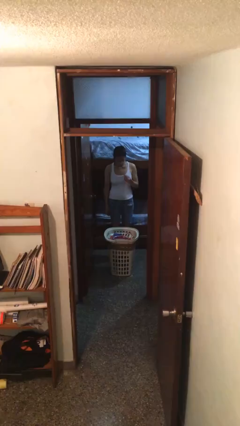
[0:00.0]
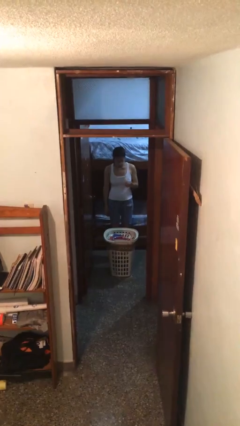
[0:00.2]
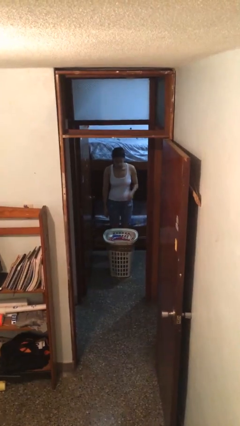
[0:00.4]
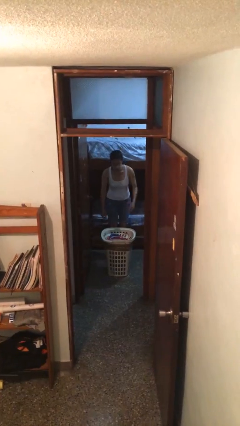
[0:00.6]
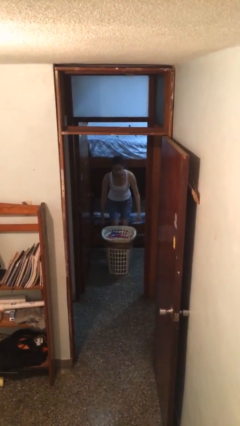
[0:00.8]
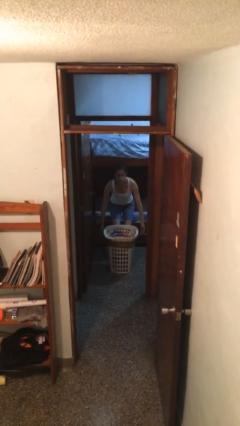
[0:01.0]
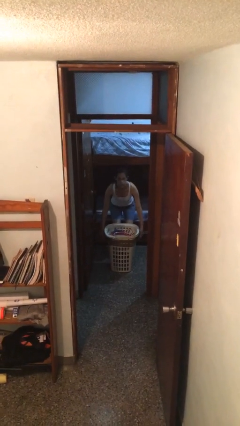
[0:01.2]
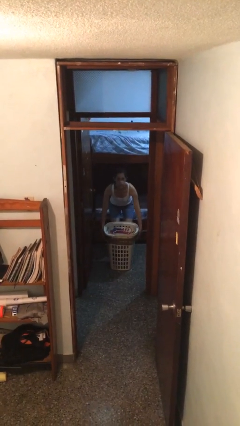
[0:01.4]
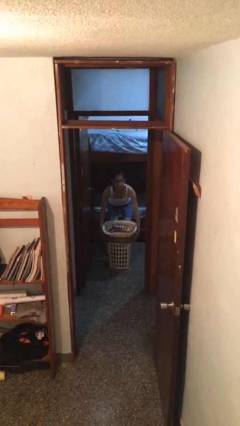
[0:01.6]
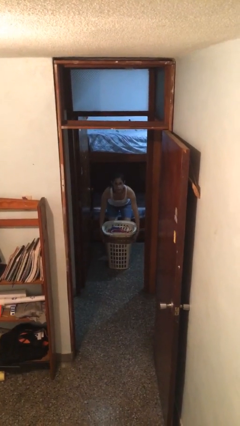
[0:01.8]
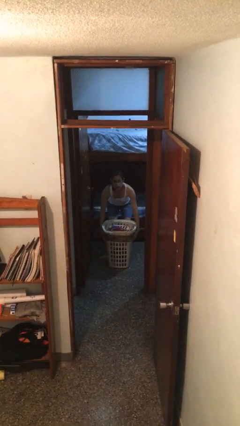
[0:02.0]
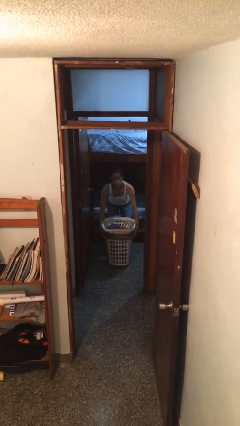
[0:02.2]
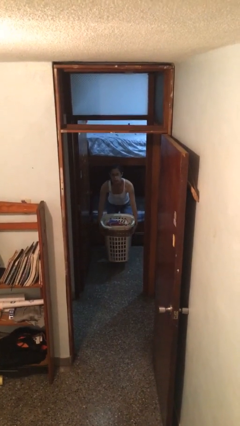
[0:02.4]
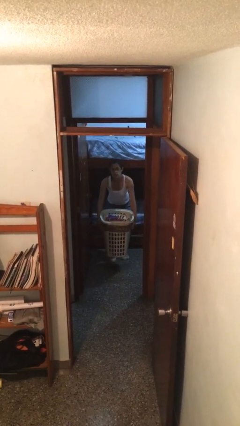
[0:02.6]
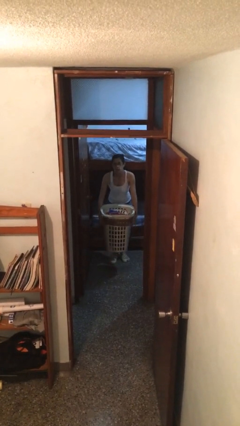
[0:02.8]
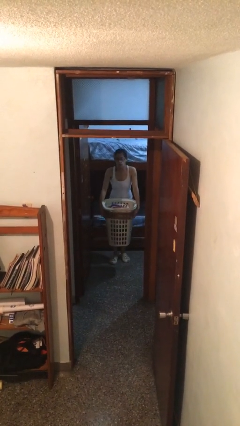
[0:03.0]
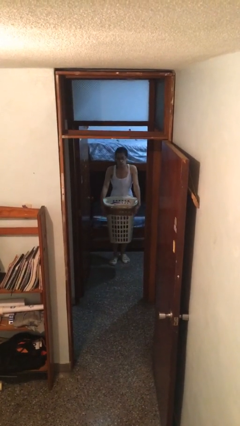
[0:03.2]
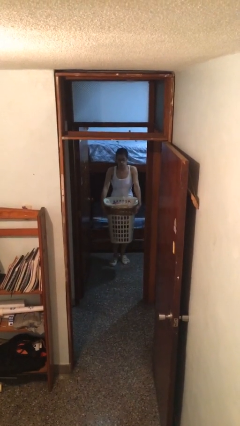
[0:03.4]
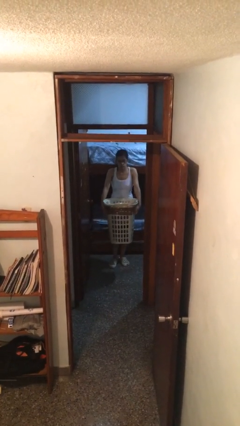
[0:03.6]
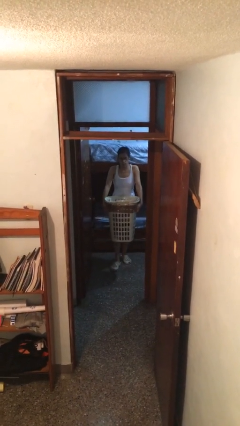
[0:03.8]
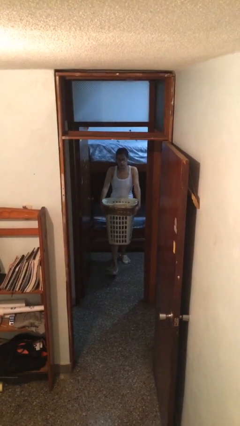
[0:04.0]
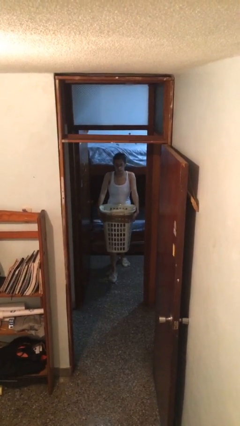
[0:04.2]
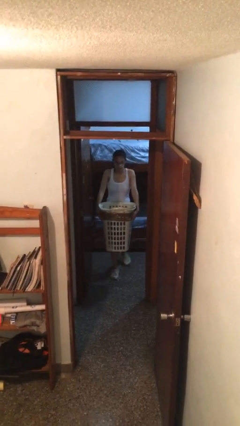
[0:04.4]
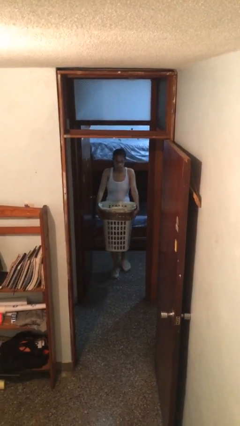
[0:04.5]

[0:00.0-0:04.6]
person picks up object from floor

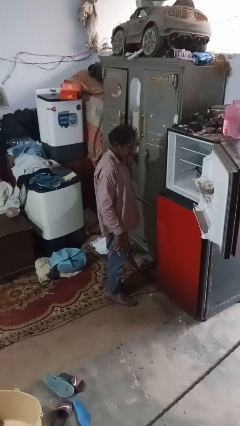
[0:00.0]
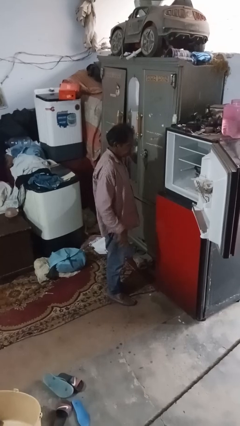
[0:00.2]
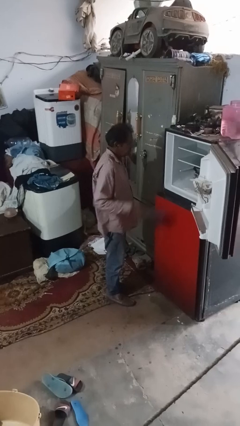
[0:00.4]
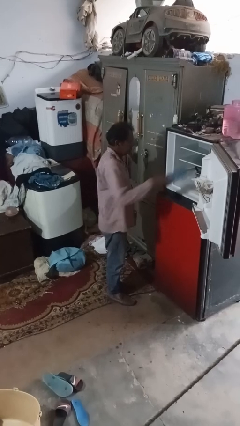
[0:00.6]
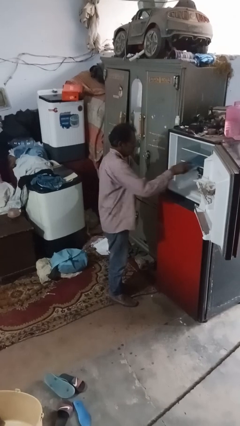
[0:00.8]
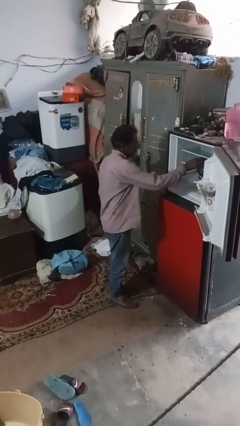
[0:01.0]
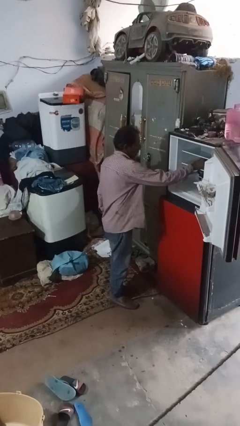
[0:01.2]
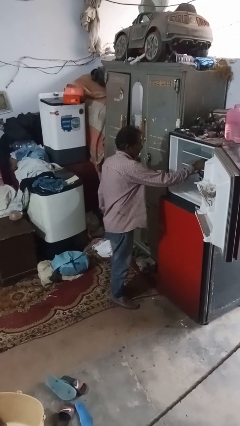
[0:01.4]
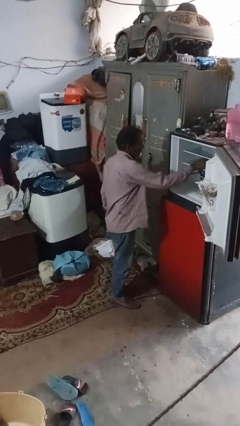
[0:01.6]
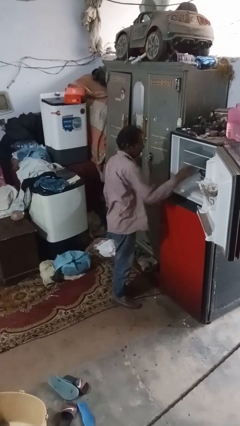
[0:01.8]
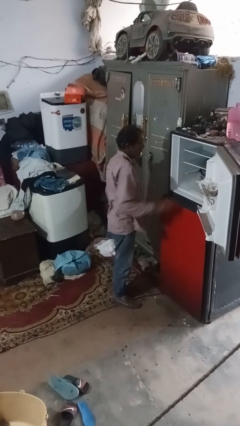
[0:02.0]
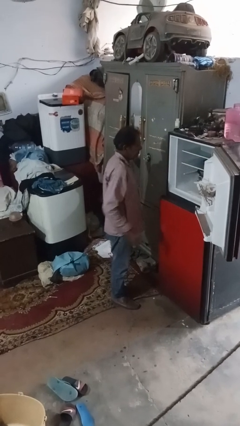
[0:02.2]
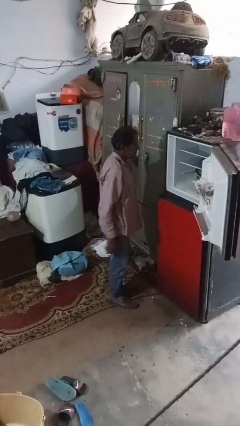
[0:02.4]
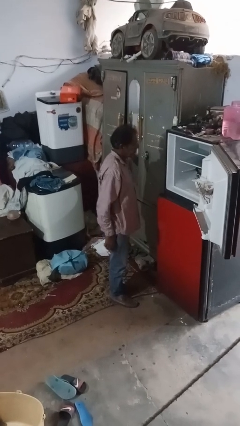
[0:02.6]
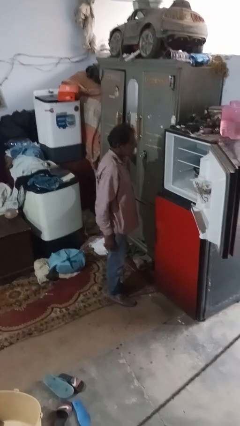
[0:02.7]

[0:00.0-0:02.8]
person puts object into refrigerator

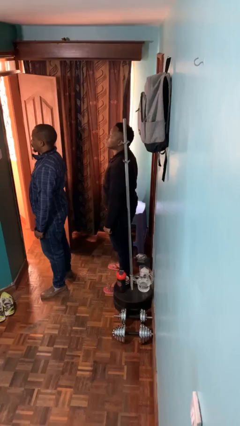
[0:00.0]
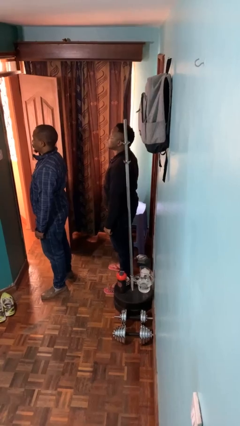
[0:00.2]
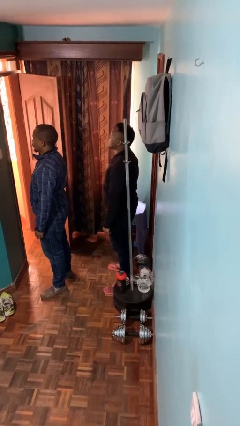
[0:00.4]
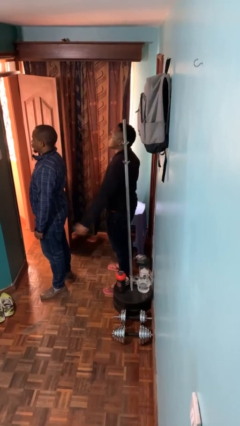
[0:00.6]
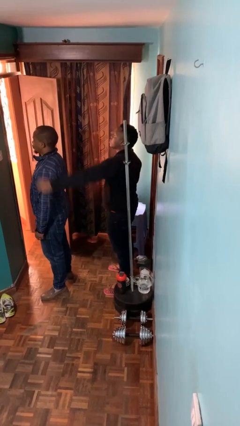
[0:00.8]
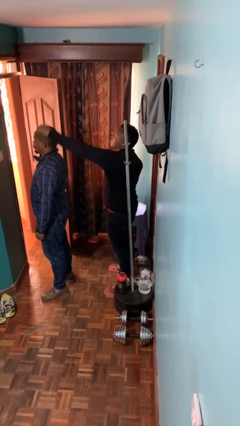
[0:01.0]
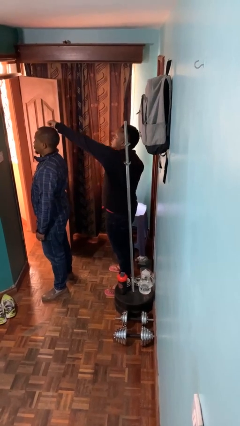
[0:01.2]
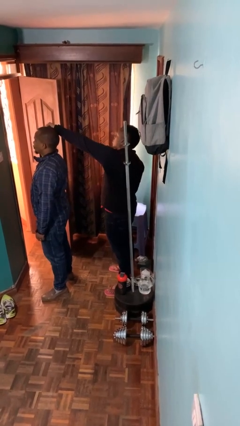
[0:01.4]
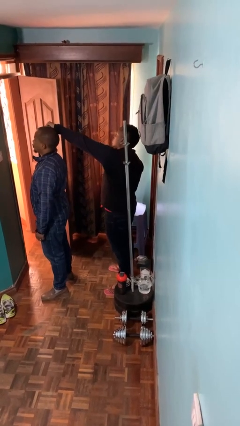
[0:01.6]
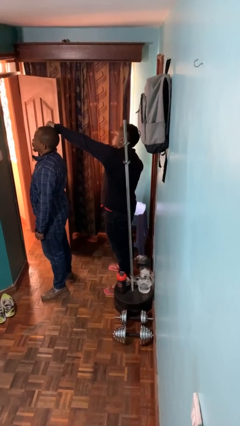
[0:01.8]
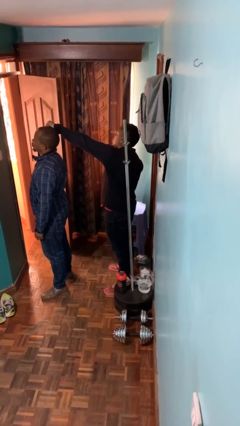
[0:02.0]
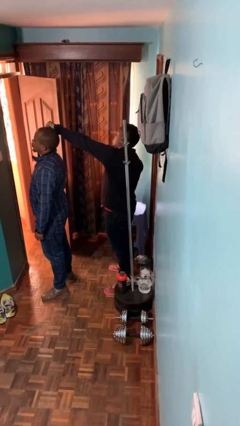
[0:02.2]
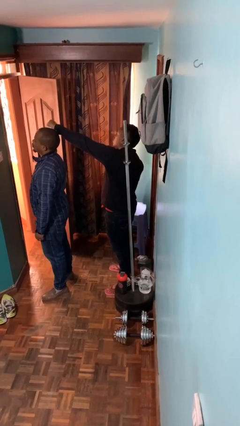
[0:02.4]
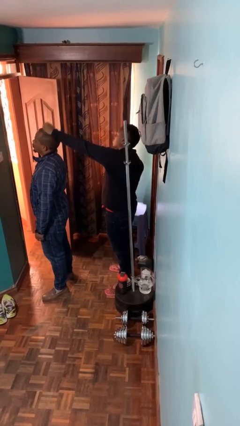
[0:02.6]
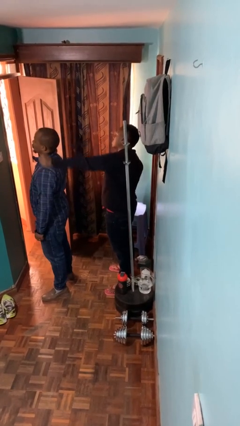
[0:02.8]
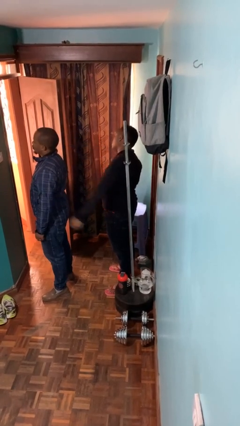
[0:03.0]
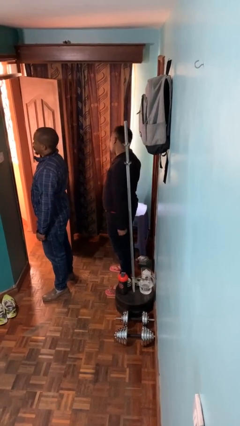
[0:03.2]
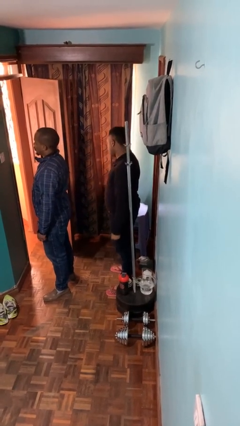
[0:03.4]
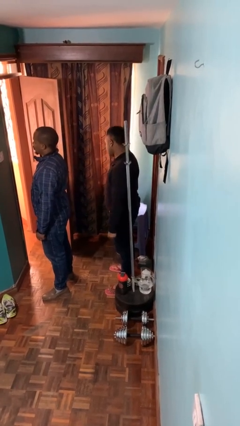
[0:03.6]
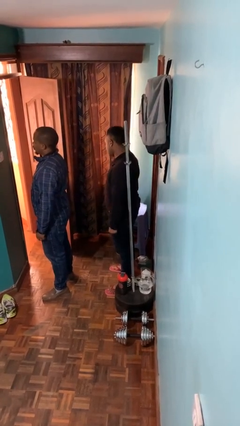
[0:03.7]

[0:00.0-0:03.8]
person grabs person by hair

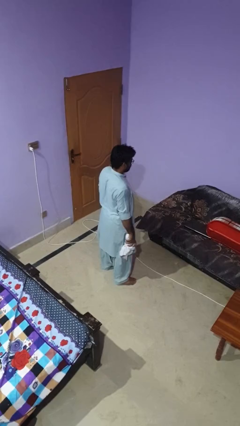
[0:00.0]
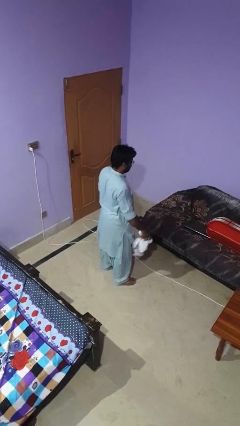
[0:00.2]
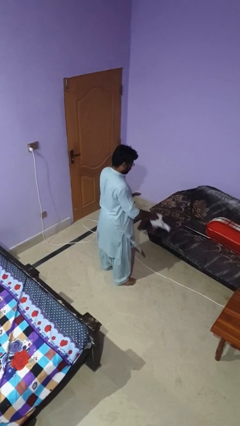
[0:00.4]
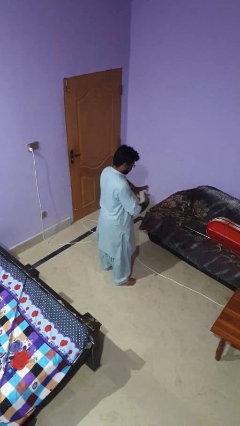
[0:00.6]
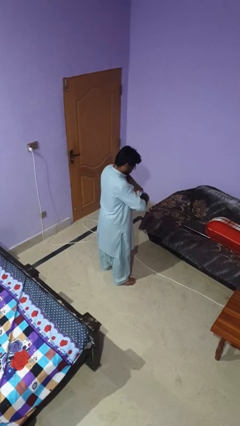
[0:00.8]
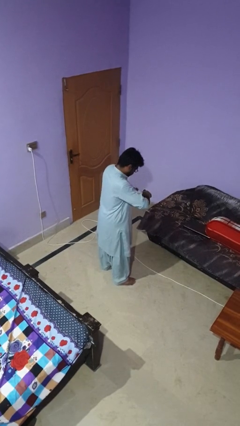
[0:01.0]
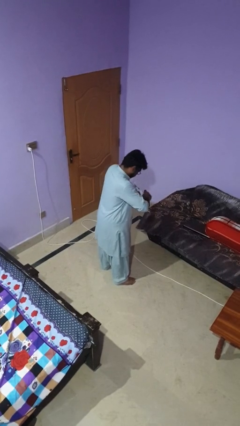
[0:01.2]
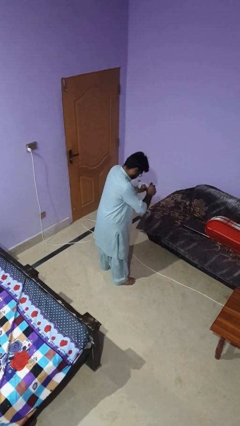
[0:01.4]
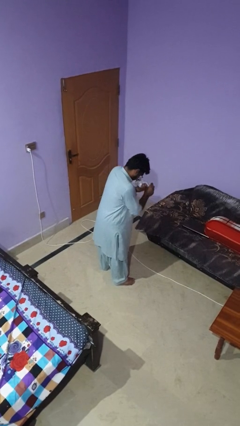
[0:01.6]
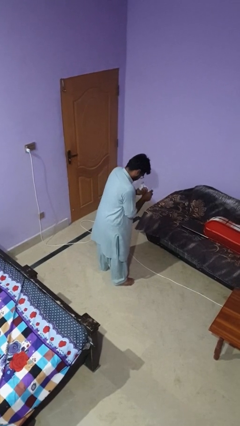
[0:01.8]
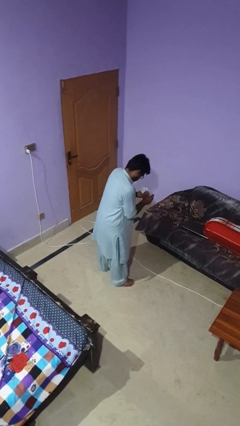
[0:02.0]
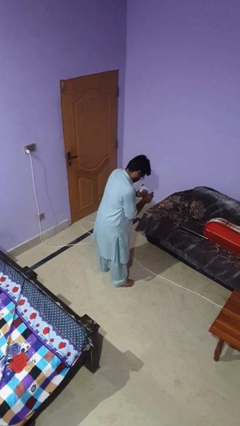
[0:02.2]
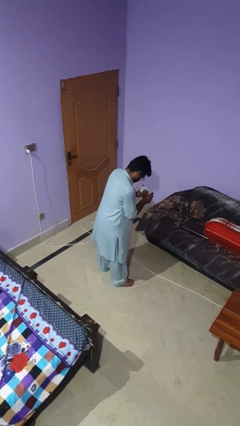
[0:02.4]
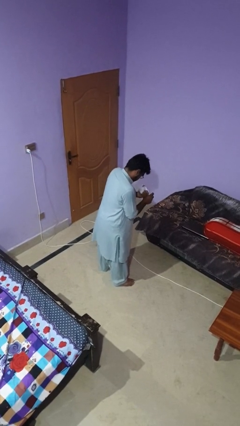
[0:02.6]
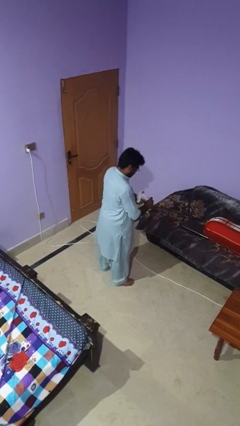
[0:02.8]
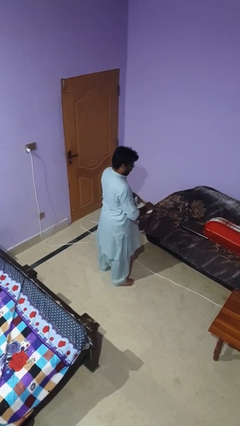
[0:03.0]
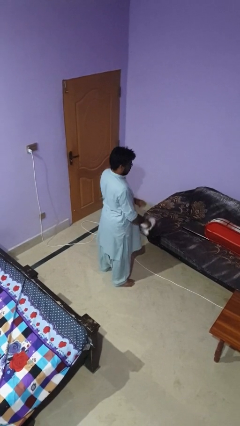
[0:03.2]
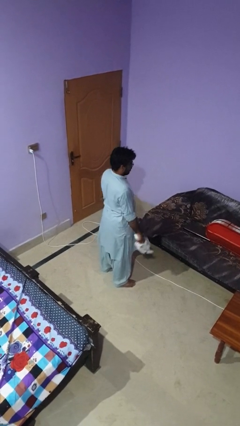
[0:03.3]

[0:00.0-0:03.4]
person squeezes object

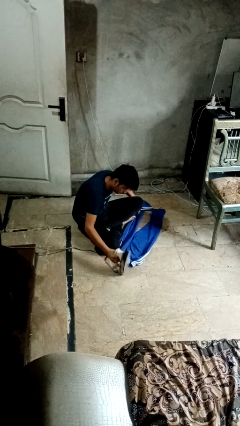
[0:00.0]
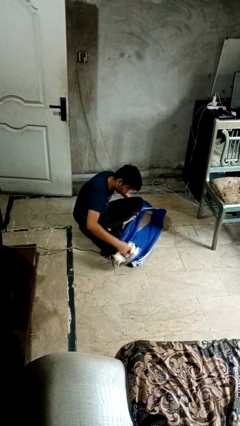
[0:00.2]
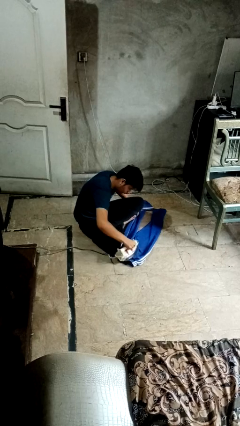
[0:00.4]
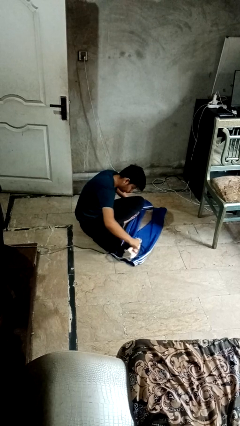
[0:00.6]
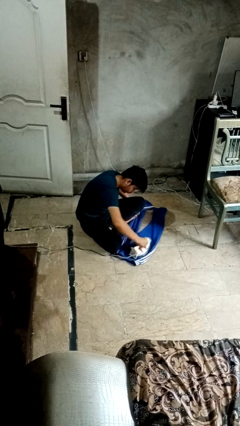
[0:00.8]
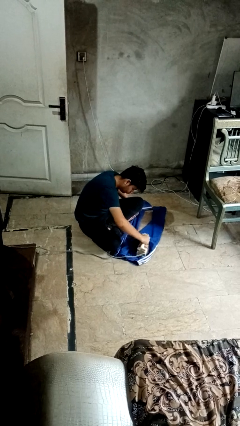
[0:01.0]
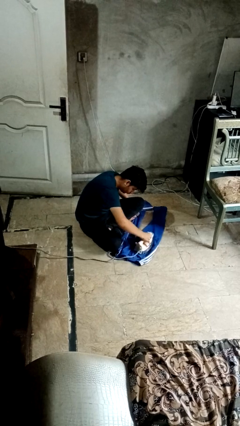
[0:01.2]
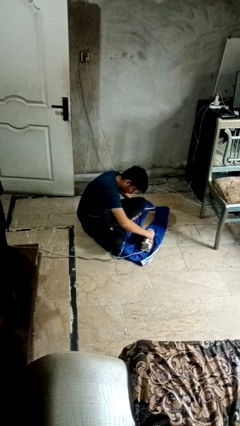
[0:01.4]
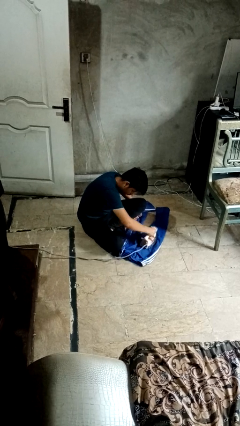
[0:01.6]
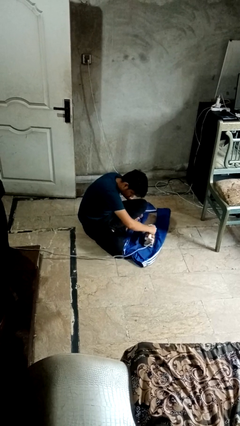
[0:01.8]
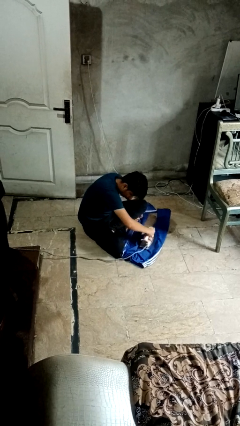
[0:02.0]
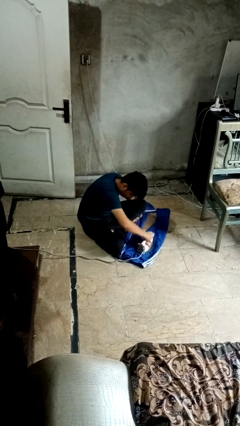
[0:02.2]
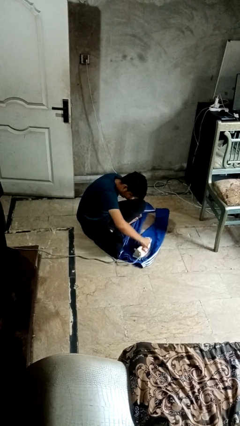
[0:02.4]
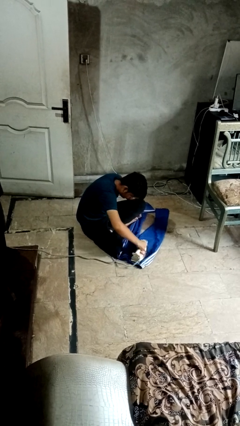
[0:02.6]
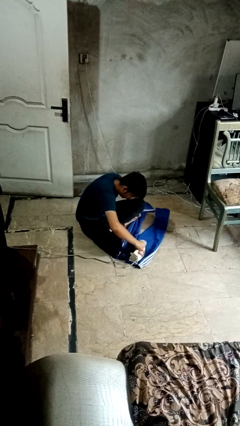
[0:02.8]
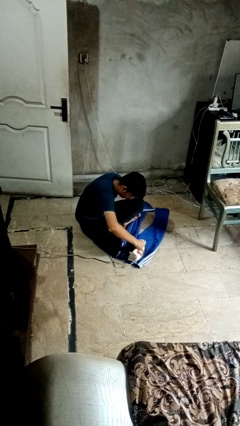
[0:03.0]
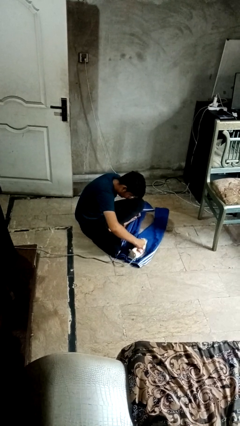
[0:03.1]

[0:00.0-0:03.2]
person irons clothes
